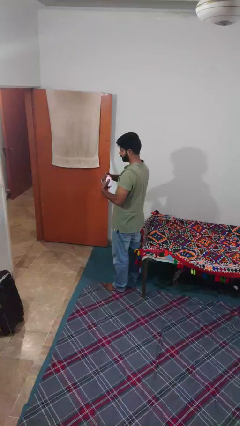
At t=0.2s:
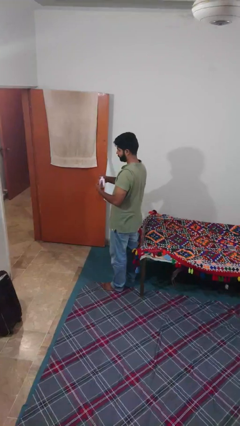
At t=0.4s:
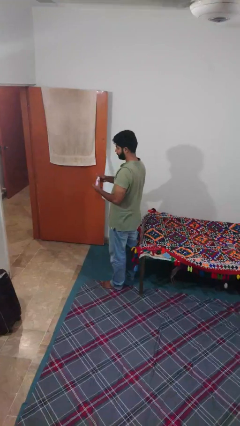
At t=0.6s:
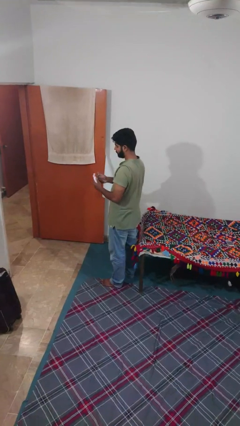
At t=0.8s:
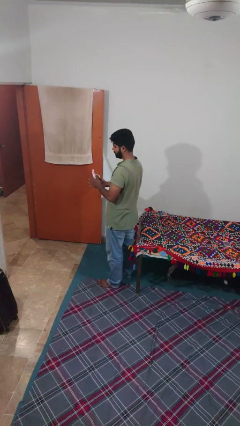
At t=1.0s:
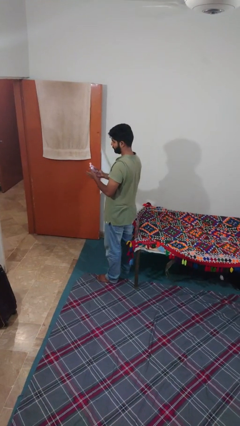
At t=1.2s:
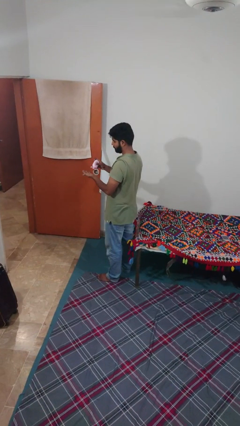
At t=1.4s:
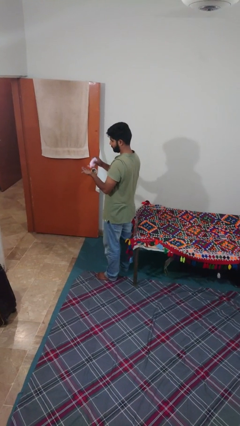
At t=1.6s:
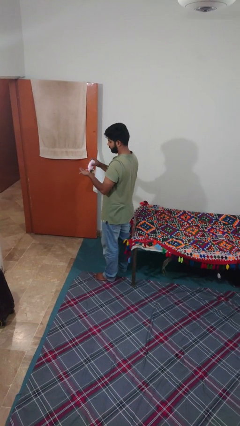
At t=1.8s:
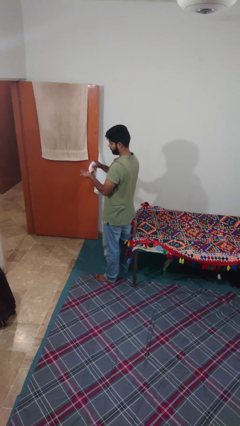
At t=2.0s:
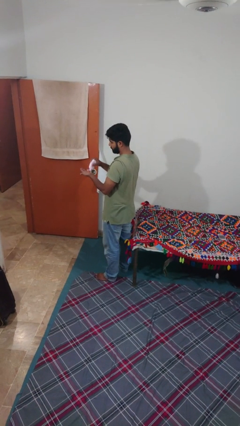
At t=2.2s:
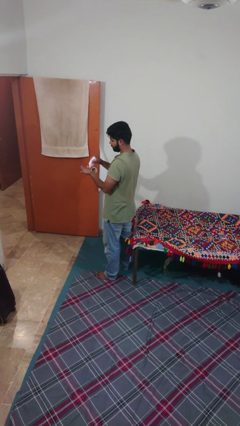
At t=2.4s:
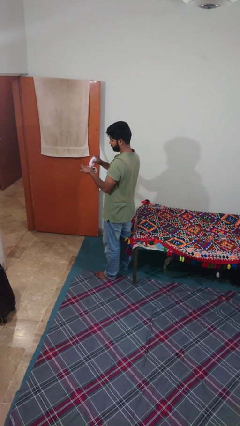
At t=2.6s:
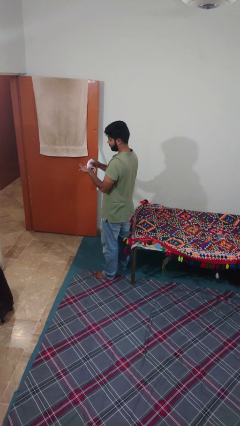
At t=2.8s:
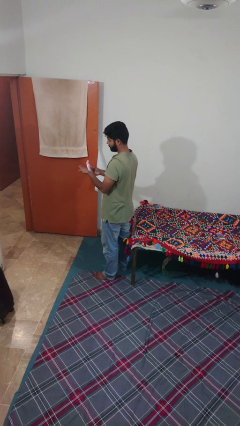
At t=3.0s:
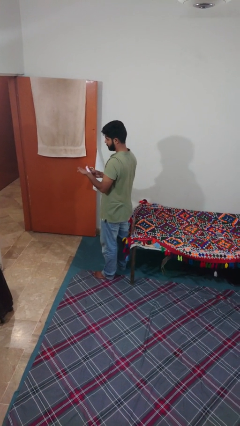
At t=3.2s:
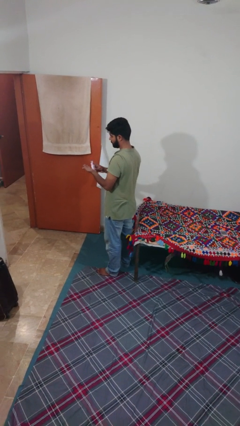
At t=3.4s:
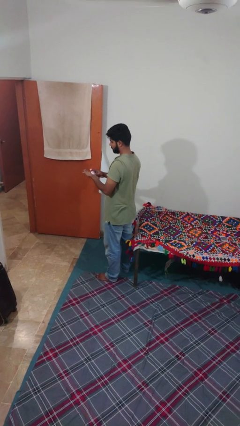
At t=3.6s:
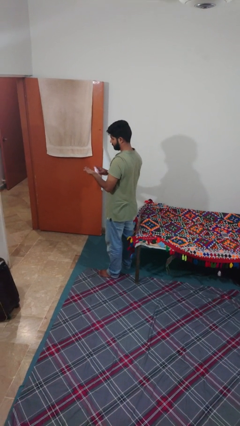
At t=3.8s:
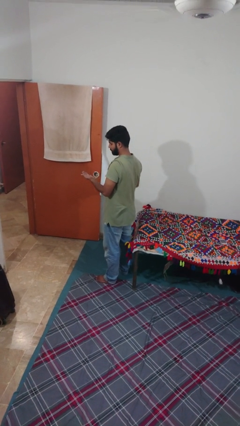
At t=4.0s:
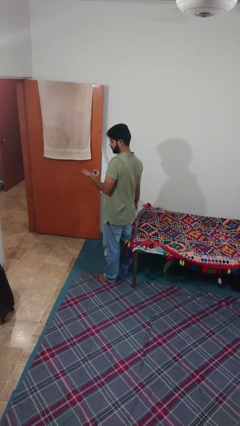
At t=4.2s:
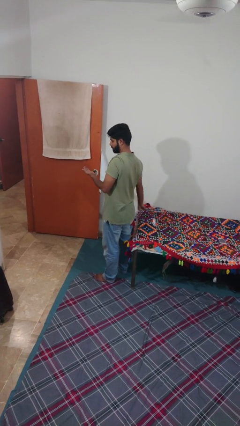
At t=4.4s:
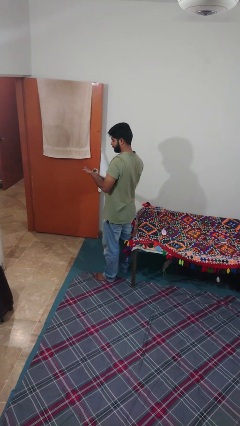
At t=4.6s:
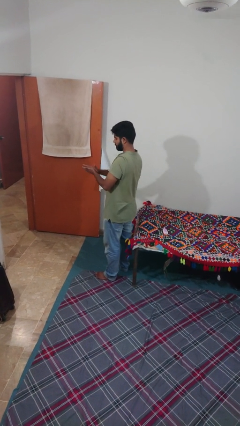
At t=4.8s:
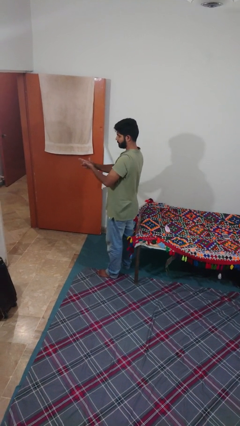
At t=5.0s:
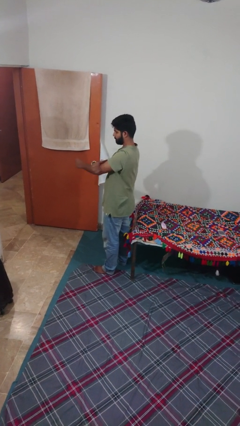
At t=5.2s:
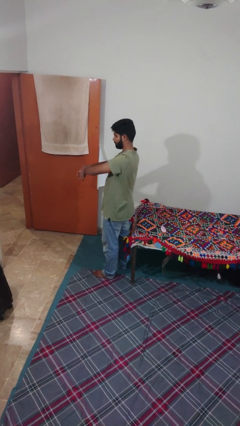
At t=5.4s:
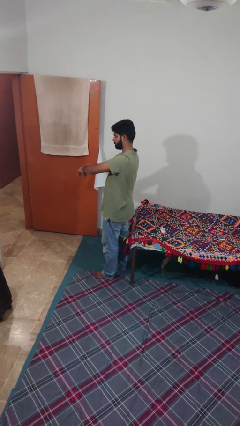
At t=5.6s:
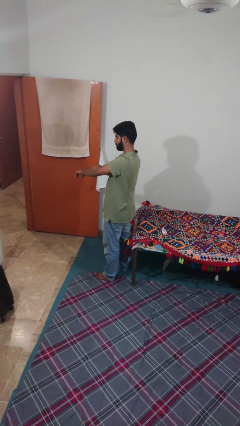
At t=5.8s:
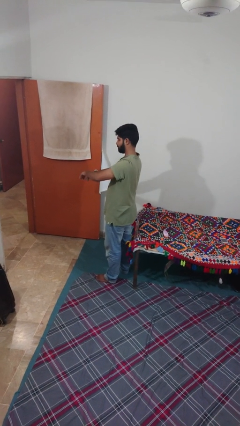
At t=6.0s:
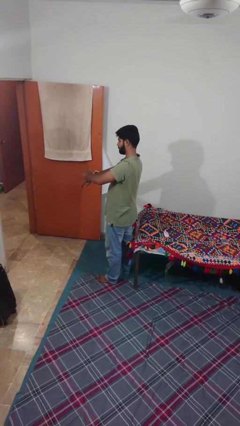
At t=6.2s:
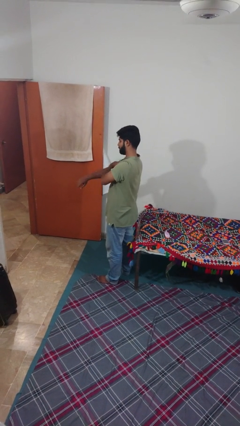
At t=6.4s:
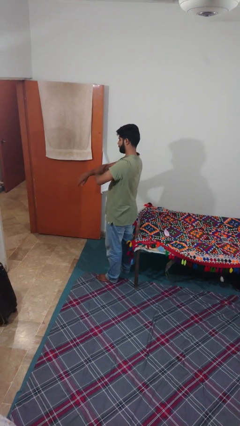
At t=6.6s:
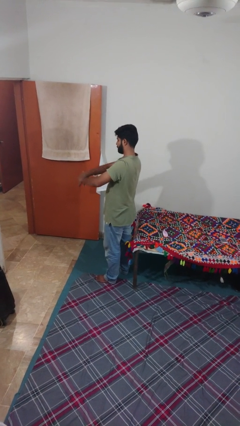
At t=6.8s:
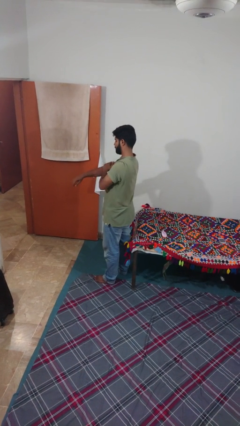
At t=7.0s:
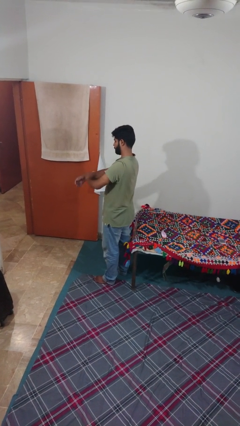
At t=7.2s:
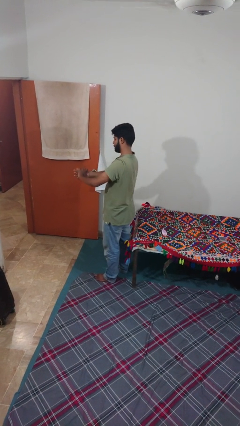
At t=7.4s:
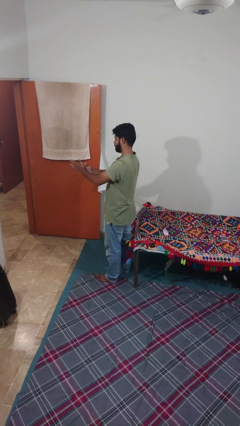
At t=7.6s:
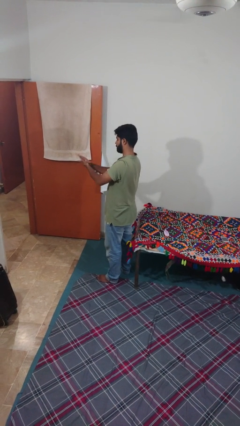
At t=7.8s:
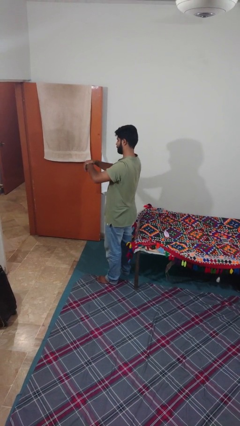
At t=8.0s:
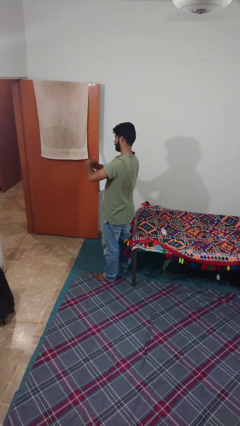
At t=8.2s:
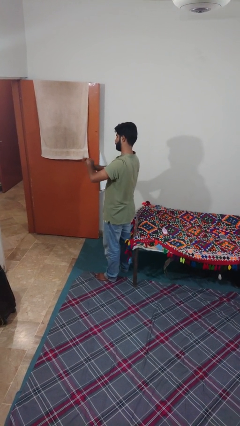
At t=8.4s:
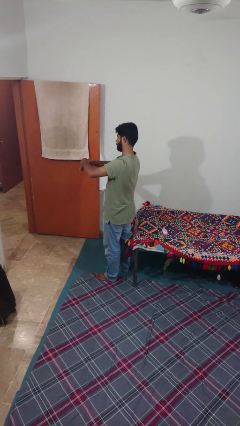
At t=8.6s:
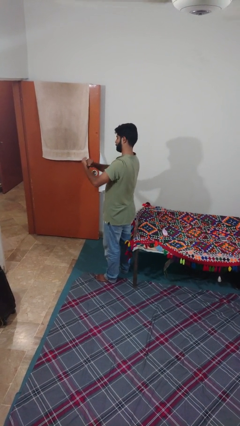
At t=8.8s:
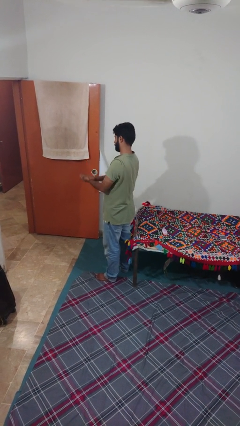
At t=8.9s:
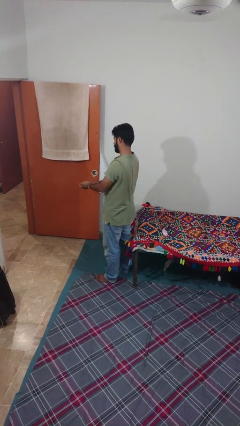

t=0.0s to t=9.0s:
person applies sunscreen

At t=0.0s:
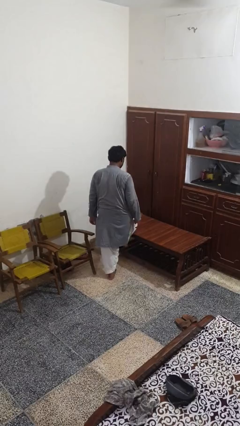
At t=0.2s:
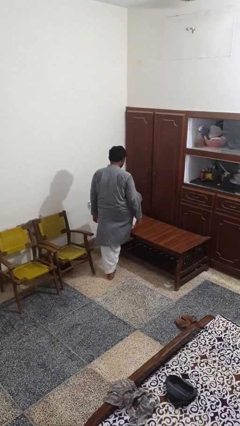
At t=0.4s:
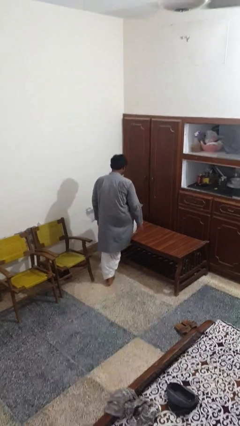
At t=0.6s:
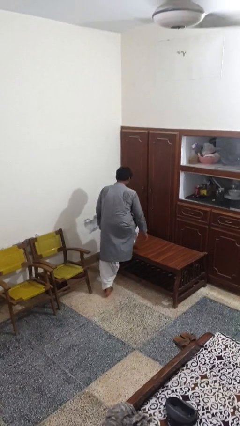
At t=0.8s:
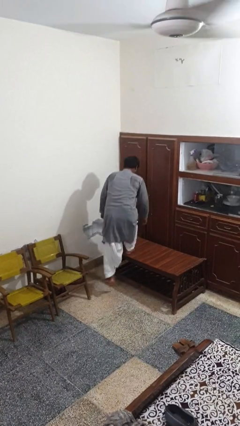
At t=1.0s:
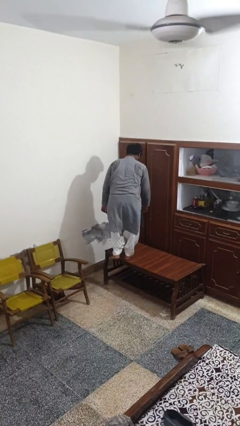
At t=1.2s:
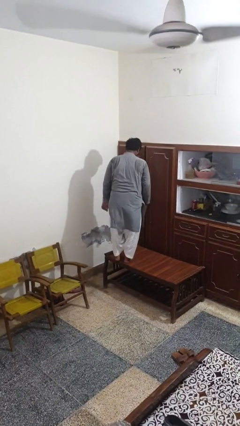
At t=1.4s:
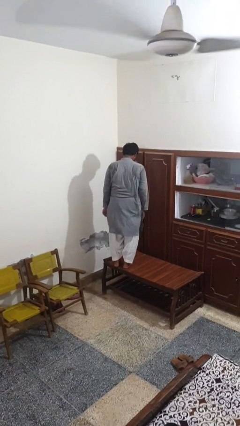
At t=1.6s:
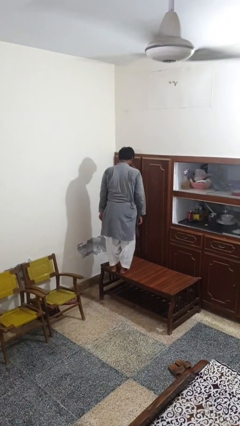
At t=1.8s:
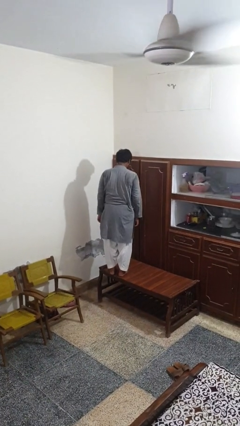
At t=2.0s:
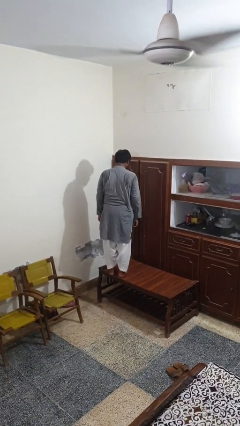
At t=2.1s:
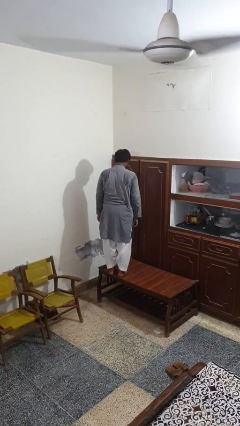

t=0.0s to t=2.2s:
person climbs on table

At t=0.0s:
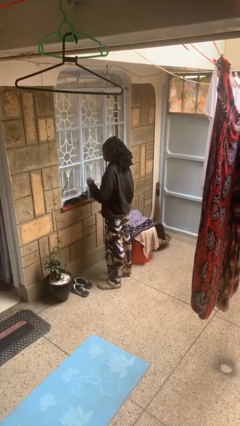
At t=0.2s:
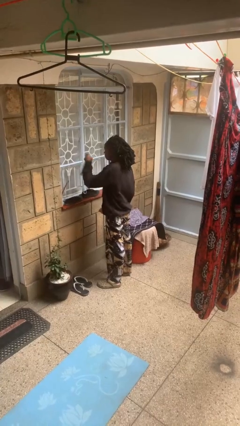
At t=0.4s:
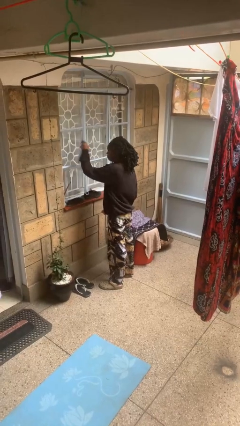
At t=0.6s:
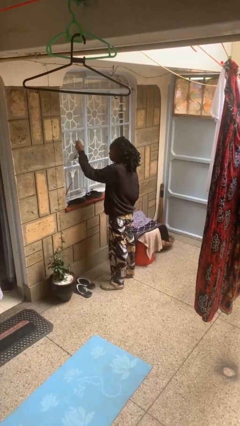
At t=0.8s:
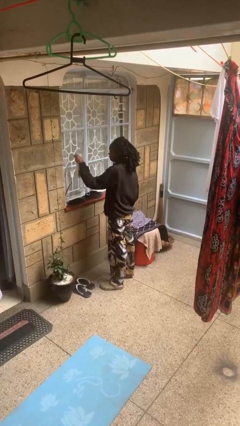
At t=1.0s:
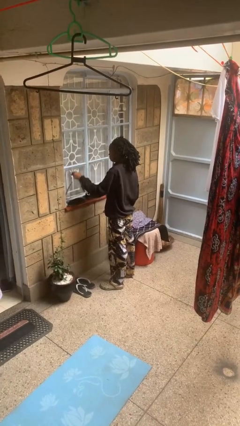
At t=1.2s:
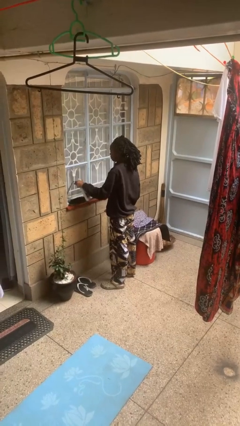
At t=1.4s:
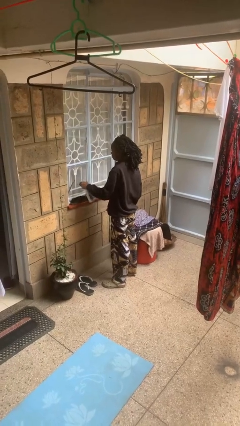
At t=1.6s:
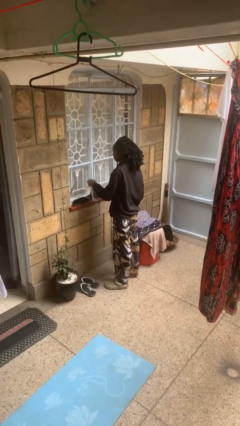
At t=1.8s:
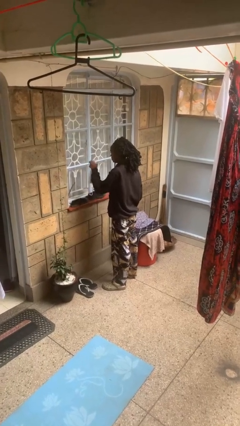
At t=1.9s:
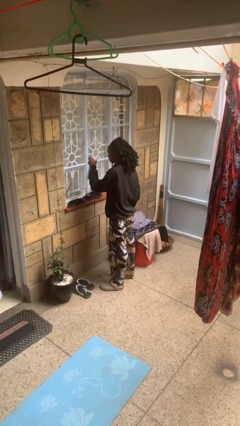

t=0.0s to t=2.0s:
person sprays from bottle

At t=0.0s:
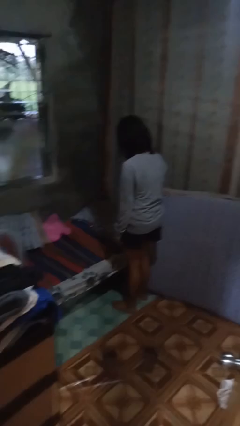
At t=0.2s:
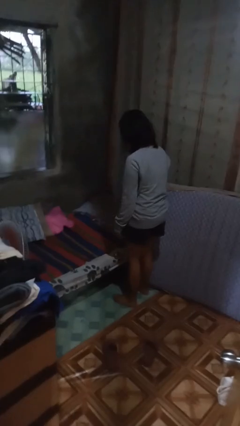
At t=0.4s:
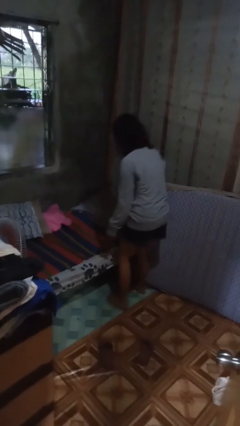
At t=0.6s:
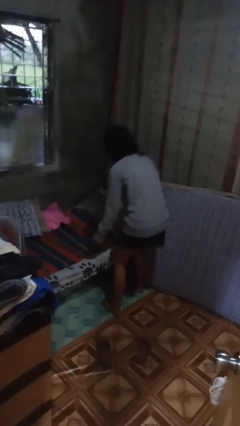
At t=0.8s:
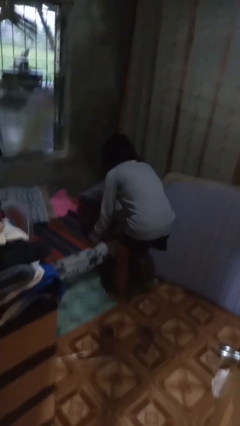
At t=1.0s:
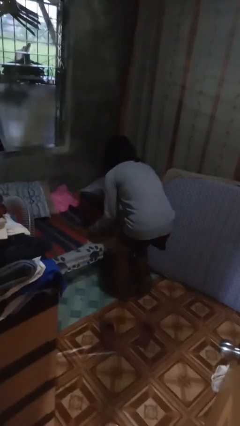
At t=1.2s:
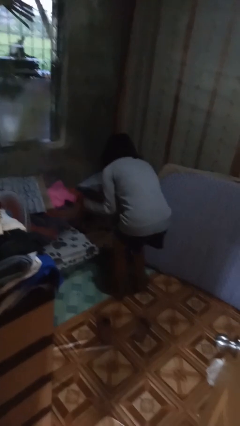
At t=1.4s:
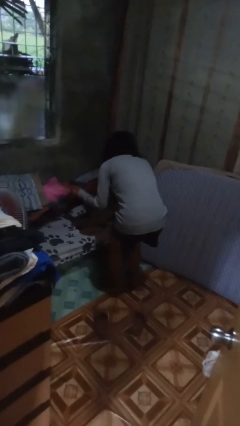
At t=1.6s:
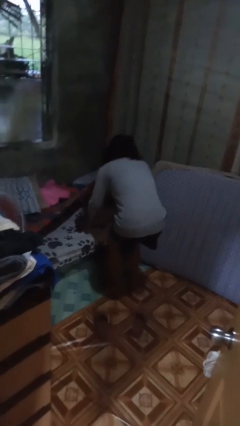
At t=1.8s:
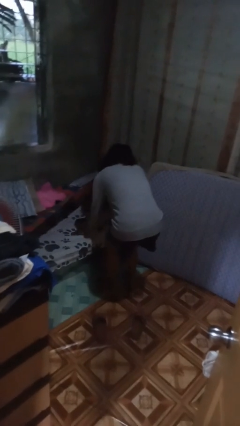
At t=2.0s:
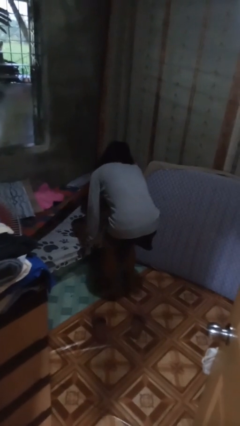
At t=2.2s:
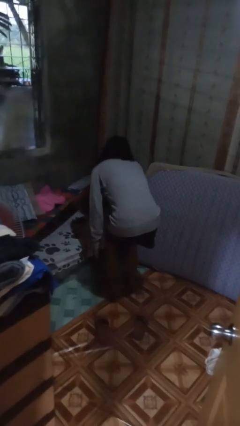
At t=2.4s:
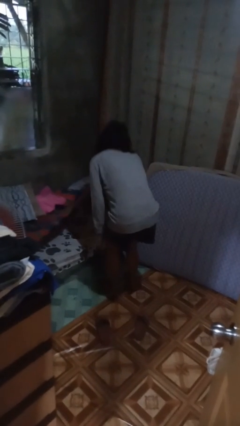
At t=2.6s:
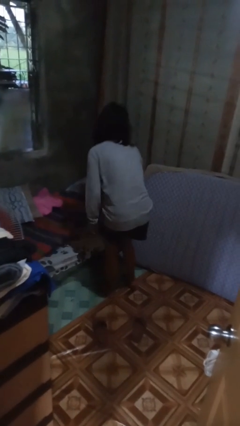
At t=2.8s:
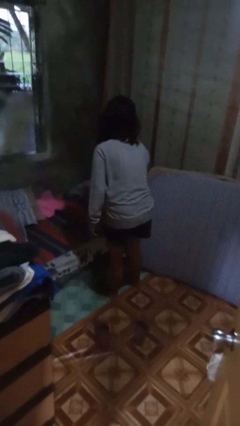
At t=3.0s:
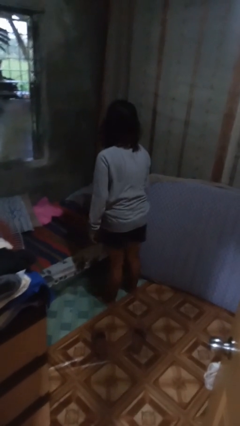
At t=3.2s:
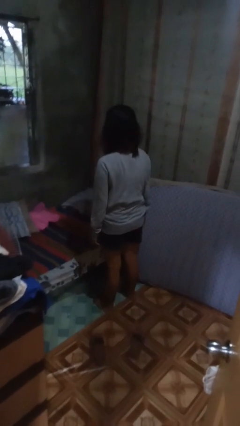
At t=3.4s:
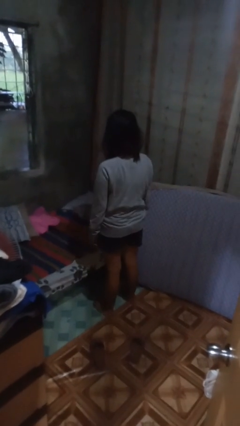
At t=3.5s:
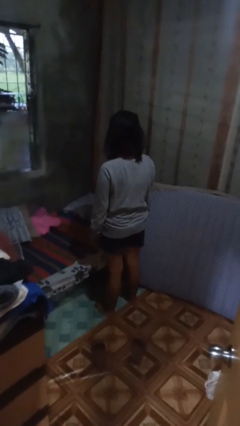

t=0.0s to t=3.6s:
person searches under bed

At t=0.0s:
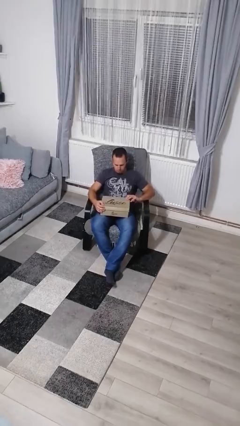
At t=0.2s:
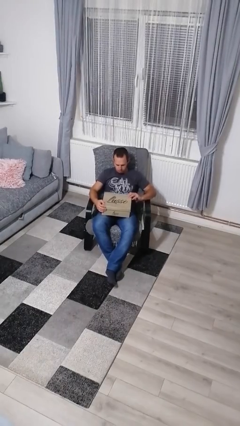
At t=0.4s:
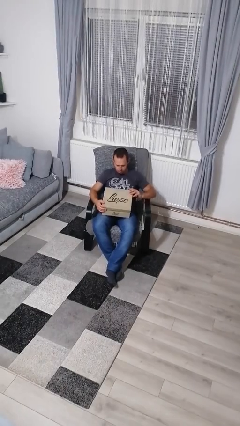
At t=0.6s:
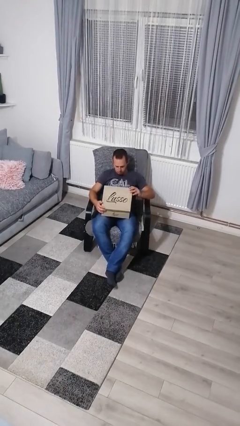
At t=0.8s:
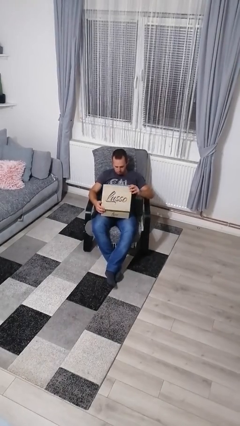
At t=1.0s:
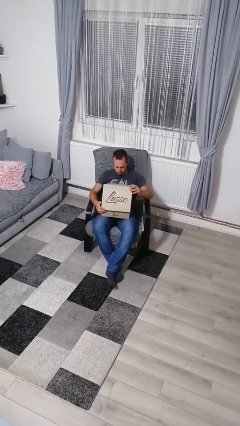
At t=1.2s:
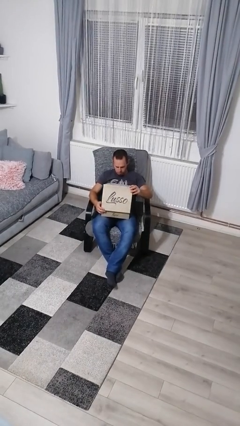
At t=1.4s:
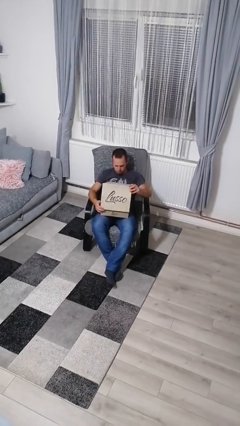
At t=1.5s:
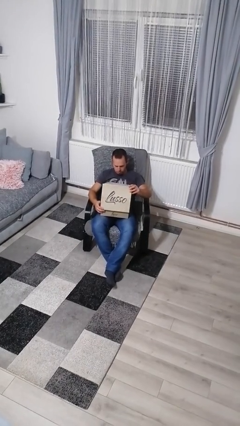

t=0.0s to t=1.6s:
person opens box
